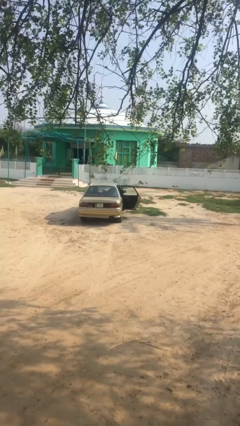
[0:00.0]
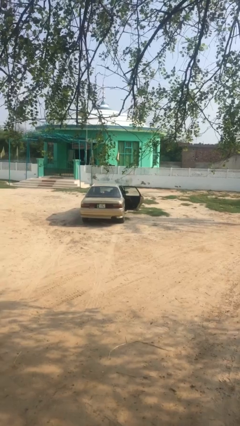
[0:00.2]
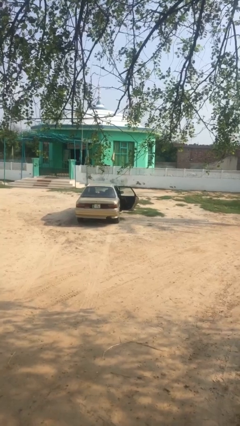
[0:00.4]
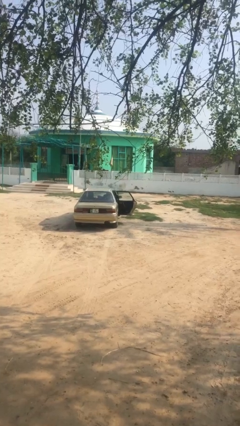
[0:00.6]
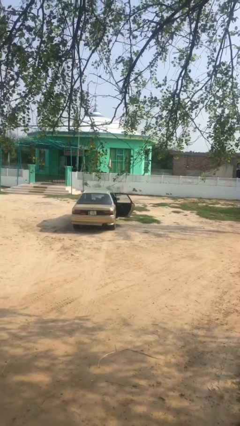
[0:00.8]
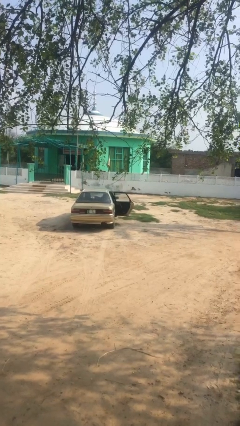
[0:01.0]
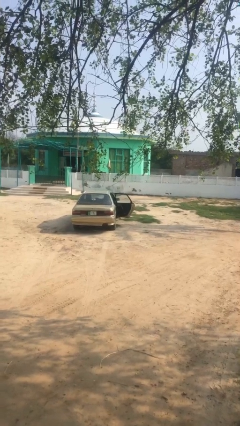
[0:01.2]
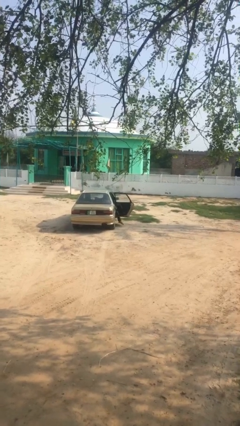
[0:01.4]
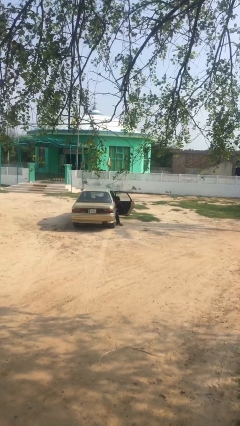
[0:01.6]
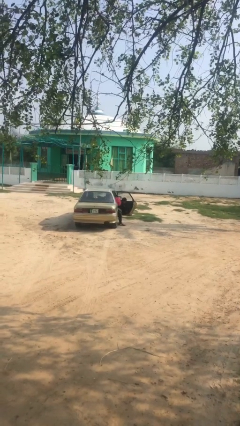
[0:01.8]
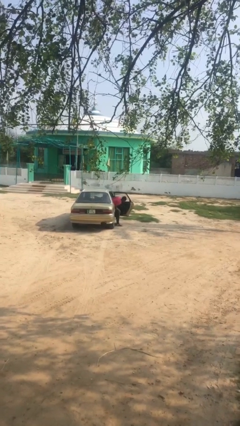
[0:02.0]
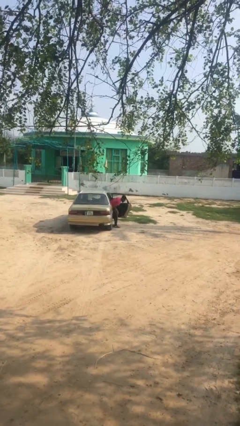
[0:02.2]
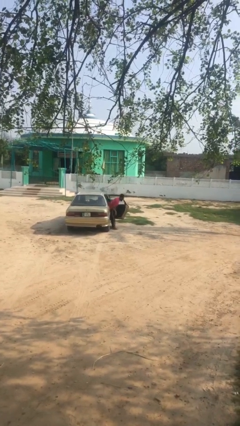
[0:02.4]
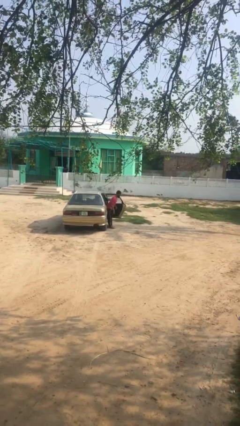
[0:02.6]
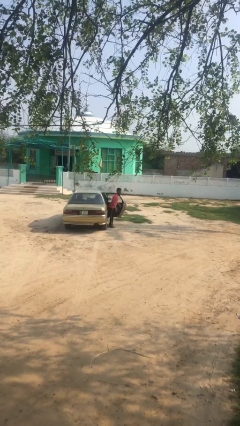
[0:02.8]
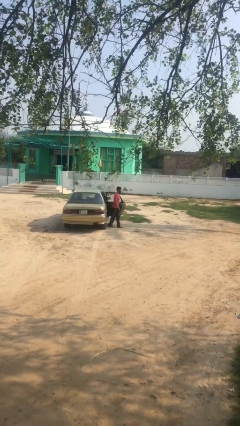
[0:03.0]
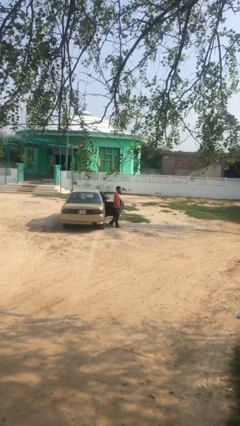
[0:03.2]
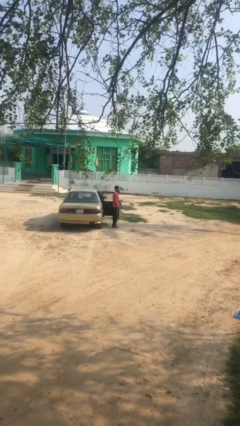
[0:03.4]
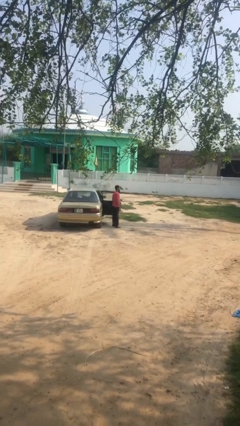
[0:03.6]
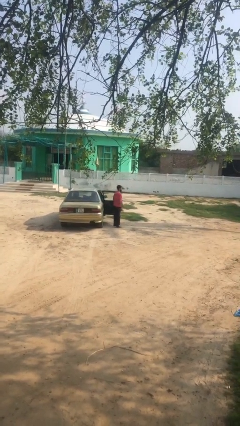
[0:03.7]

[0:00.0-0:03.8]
person exits car

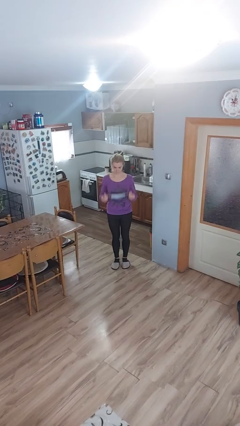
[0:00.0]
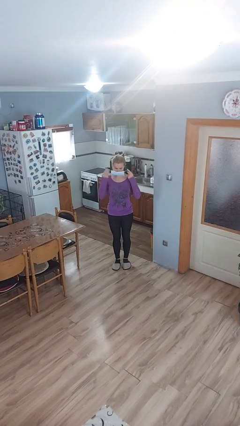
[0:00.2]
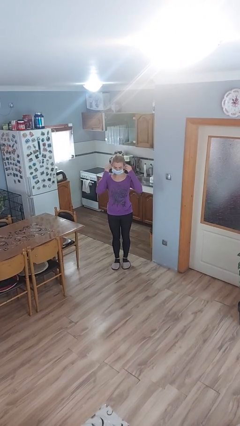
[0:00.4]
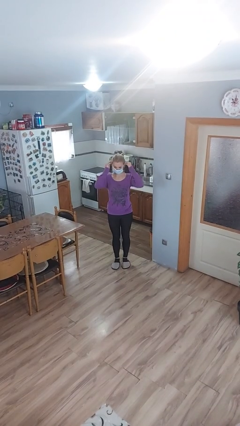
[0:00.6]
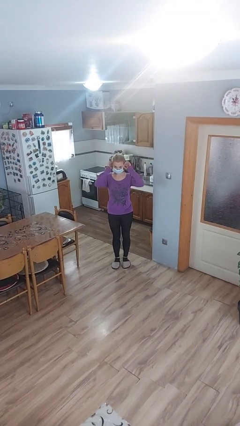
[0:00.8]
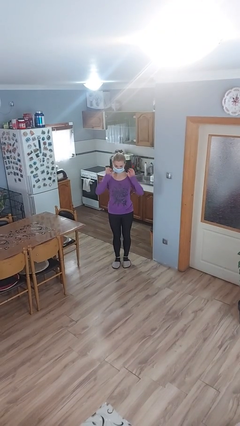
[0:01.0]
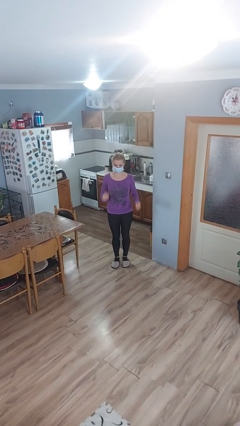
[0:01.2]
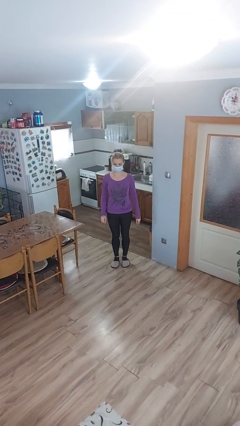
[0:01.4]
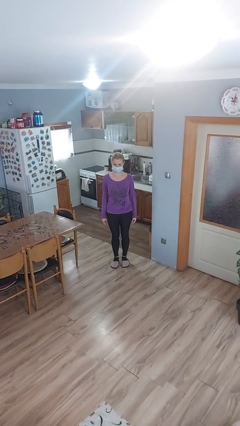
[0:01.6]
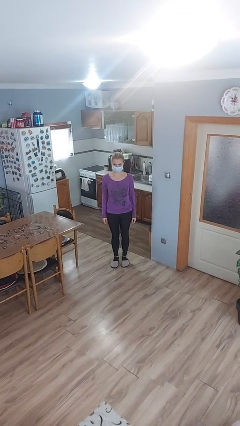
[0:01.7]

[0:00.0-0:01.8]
person puts on facemask

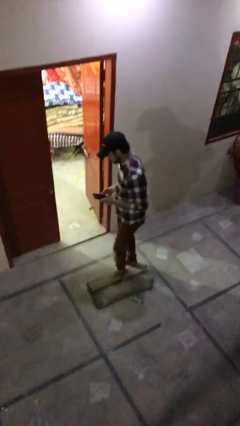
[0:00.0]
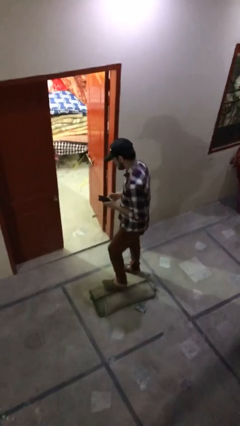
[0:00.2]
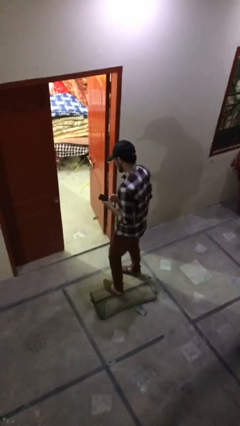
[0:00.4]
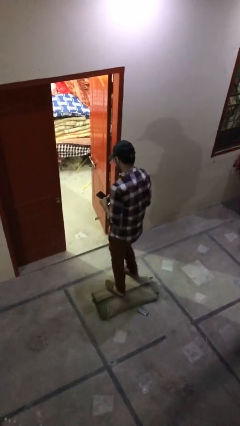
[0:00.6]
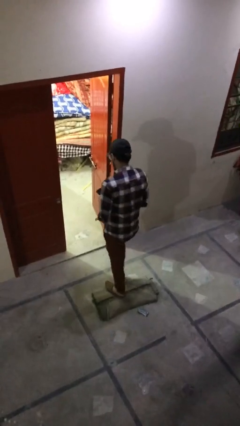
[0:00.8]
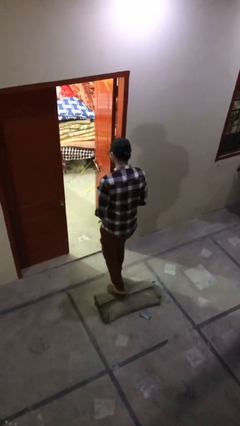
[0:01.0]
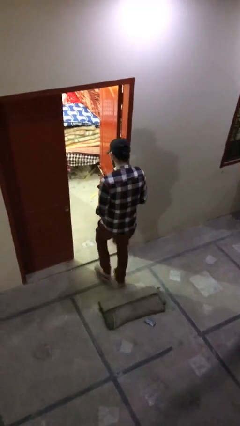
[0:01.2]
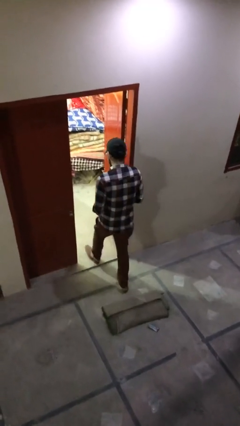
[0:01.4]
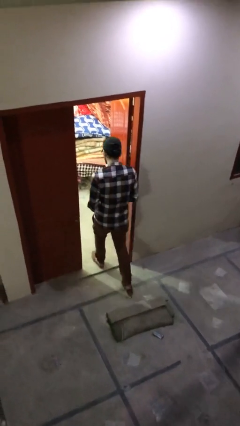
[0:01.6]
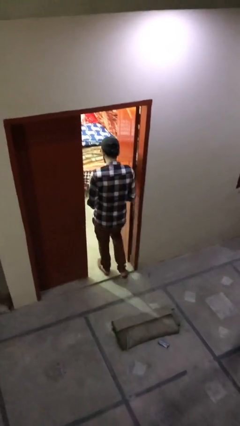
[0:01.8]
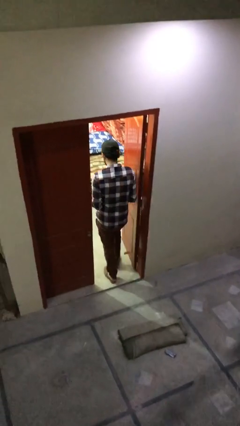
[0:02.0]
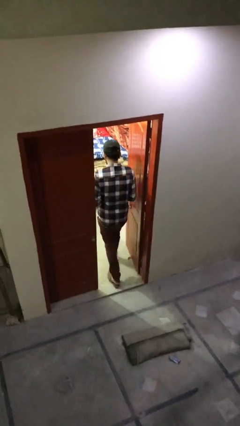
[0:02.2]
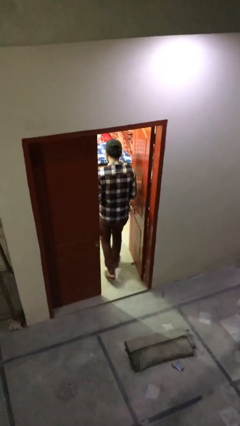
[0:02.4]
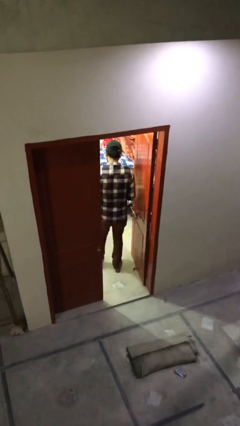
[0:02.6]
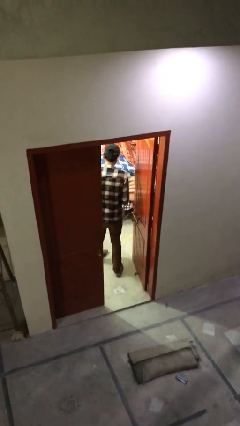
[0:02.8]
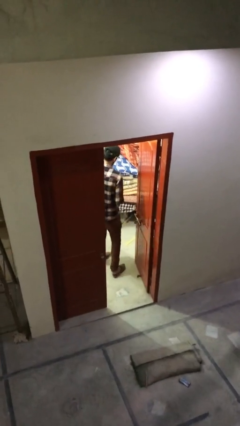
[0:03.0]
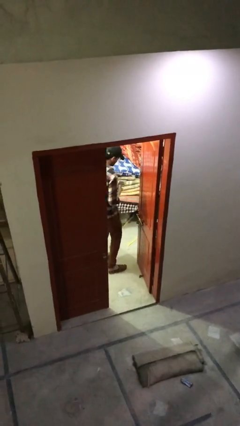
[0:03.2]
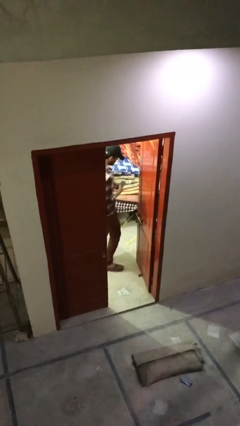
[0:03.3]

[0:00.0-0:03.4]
person exits scene through structure

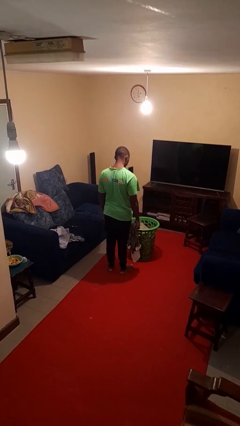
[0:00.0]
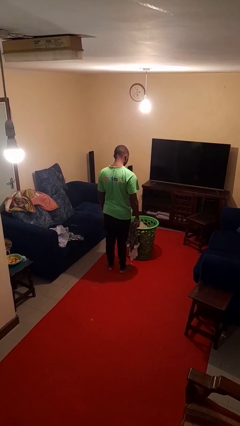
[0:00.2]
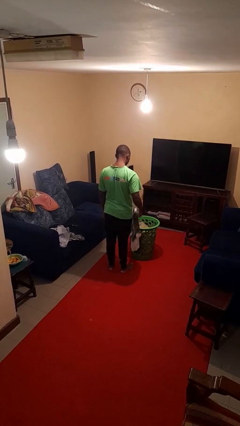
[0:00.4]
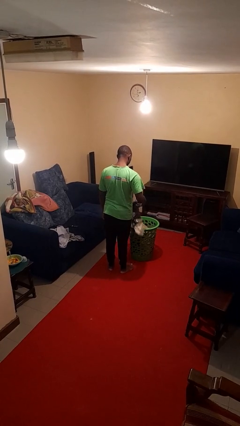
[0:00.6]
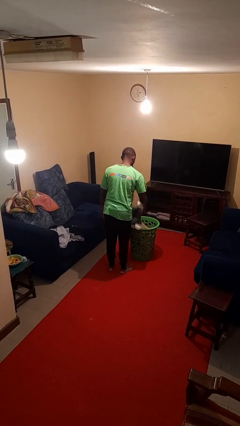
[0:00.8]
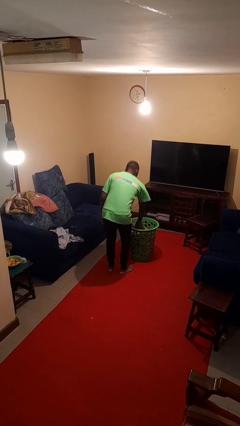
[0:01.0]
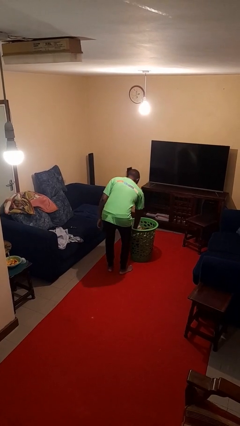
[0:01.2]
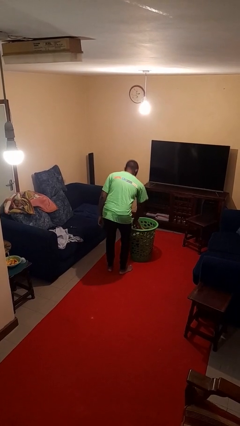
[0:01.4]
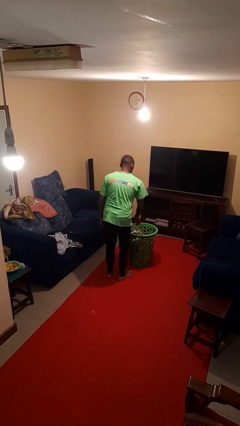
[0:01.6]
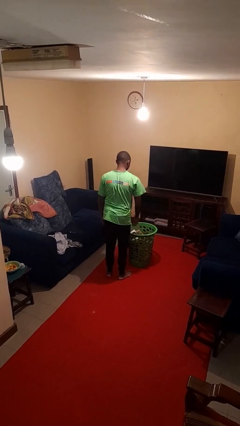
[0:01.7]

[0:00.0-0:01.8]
person puts object into basket

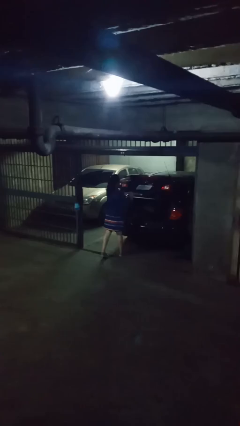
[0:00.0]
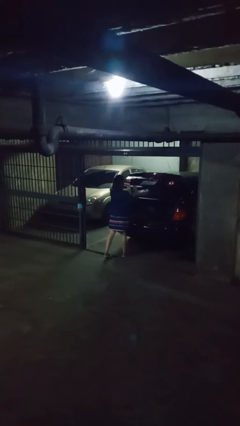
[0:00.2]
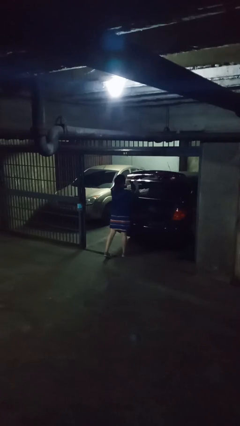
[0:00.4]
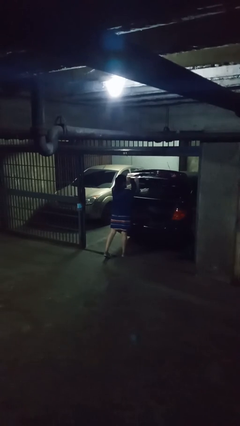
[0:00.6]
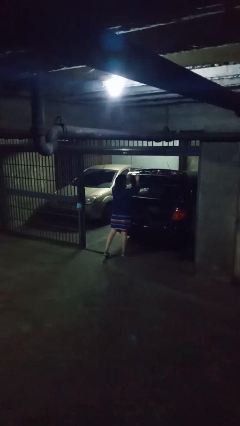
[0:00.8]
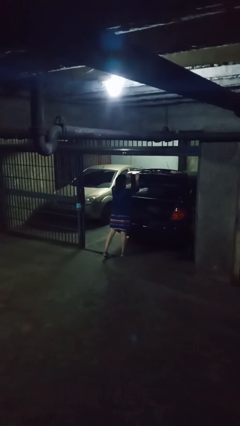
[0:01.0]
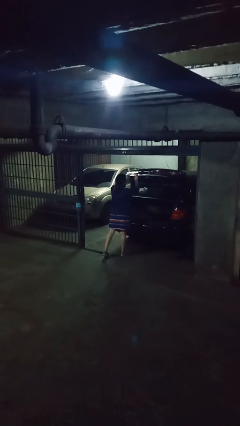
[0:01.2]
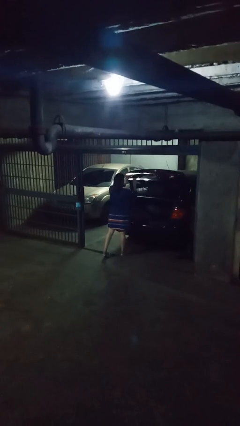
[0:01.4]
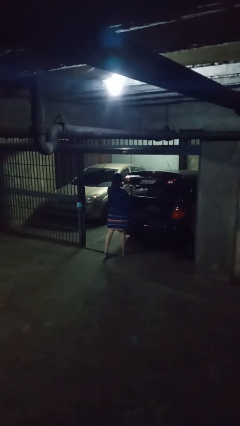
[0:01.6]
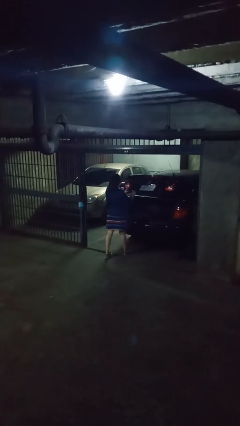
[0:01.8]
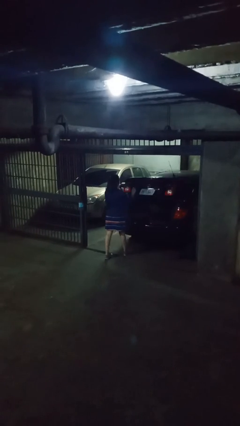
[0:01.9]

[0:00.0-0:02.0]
person opens car trunk

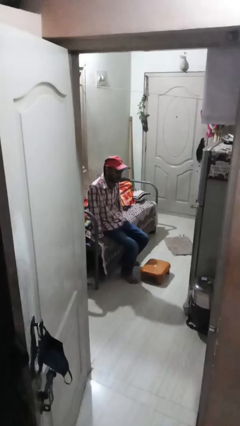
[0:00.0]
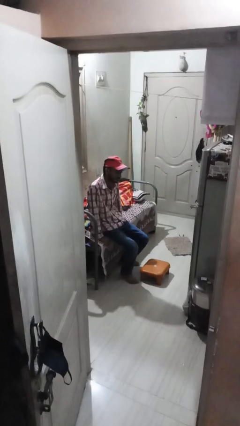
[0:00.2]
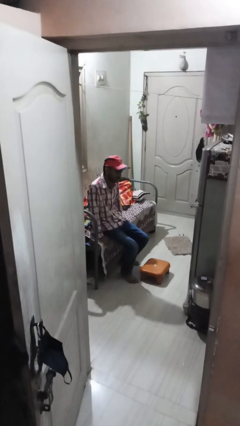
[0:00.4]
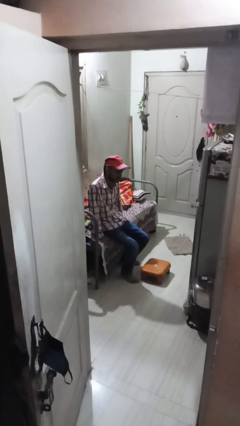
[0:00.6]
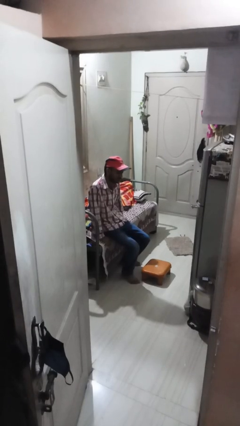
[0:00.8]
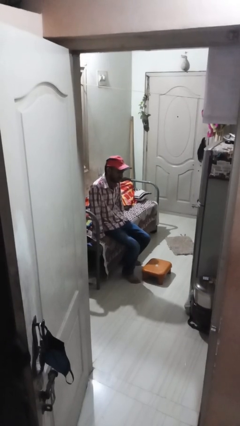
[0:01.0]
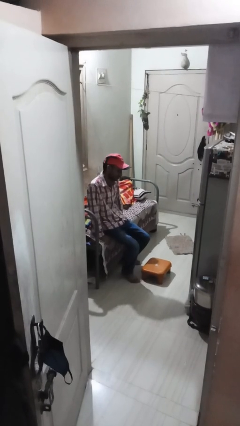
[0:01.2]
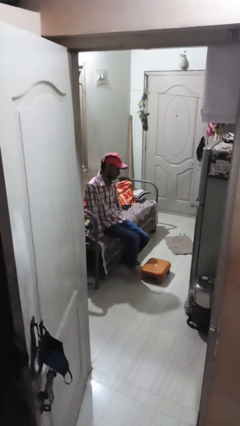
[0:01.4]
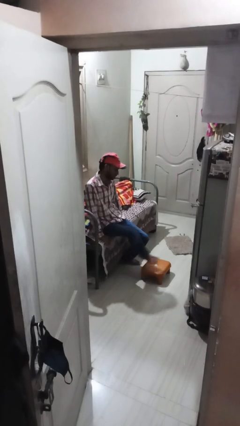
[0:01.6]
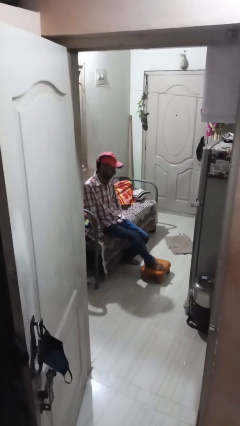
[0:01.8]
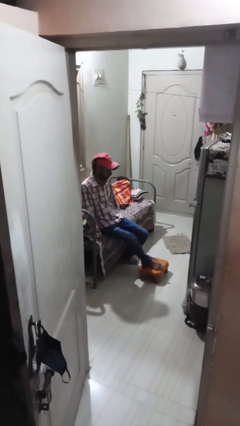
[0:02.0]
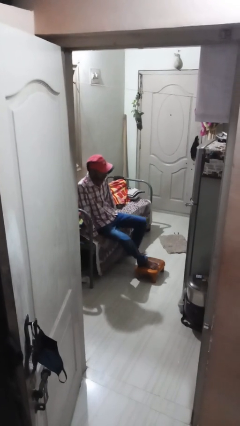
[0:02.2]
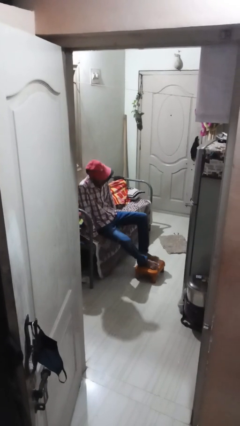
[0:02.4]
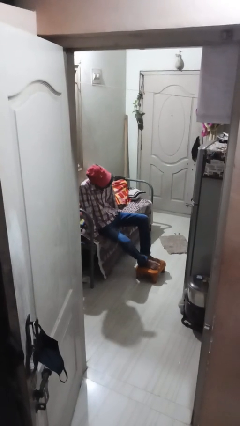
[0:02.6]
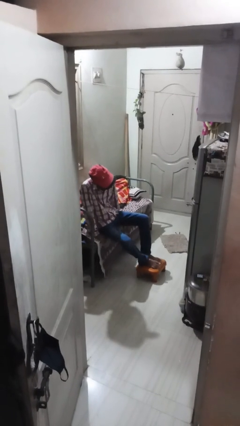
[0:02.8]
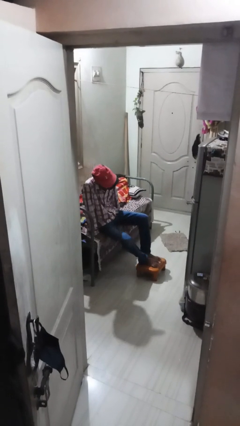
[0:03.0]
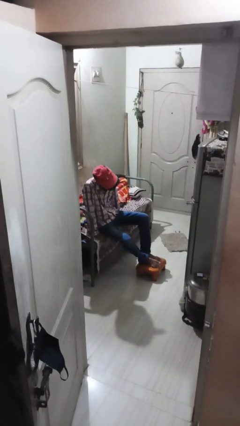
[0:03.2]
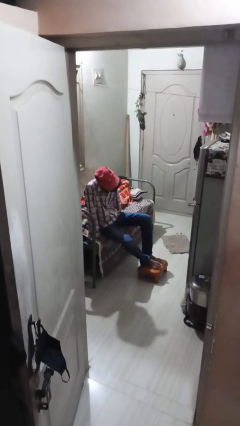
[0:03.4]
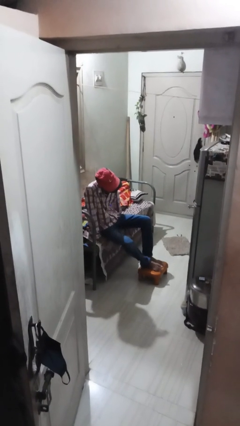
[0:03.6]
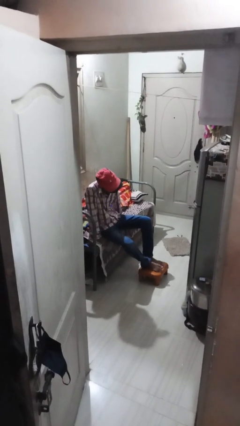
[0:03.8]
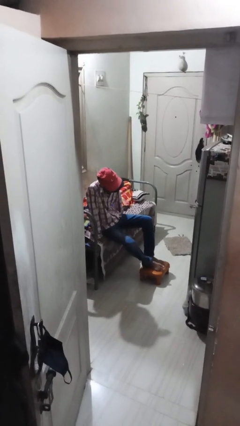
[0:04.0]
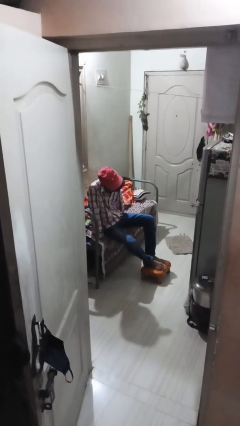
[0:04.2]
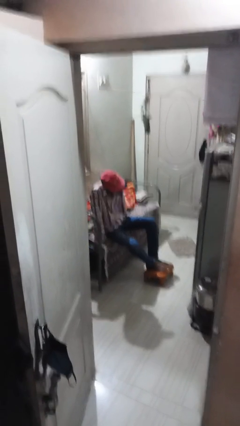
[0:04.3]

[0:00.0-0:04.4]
person puts feet up

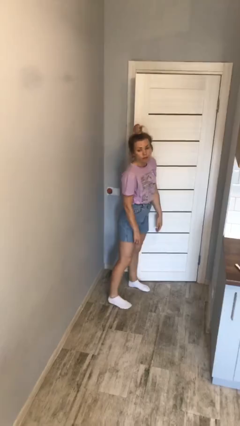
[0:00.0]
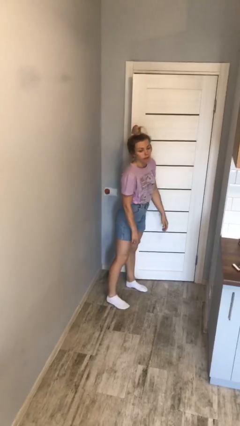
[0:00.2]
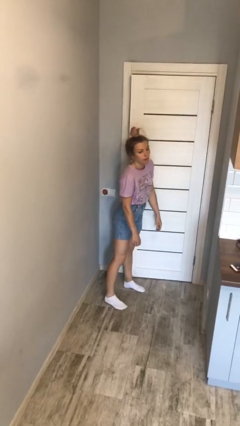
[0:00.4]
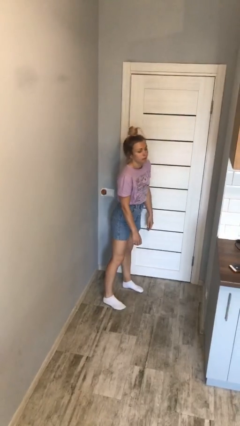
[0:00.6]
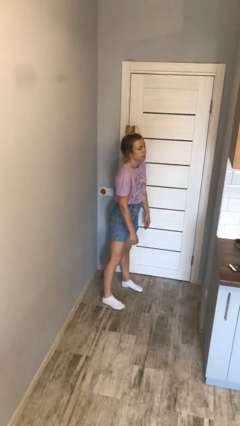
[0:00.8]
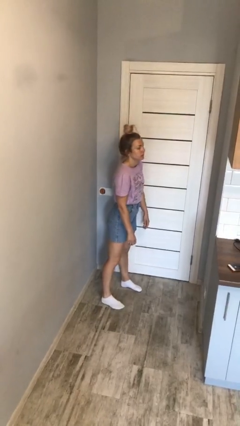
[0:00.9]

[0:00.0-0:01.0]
person closes door with hip
